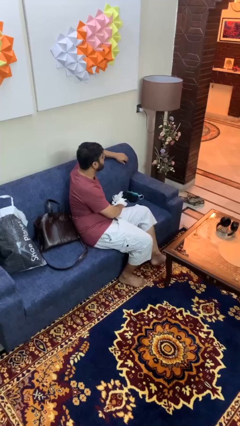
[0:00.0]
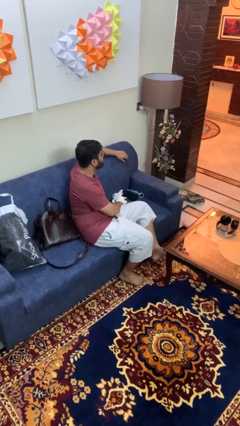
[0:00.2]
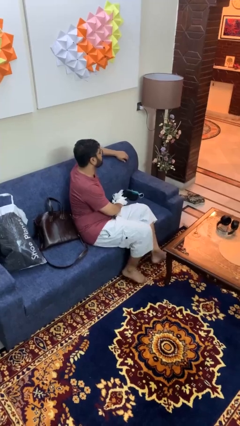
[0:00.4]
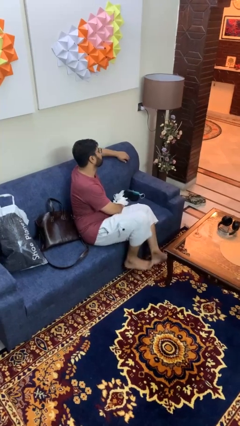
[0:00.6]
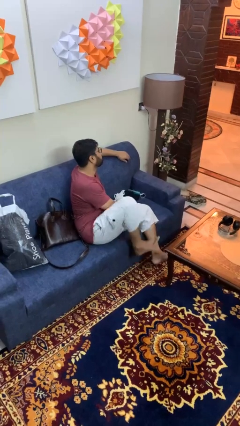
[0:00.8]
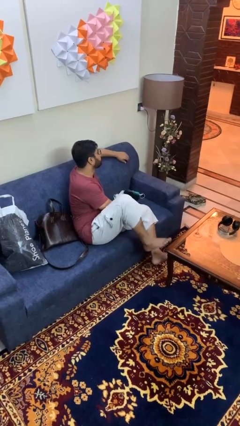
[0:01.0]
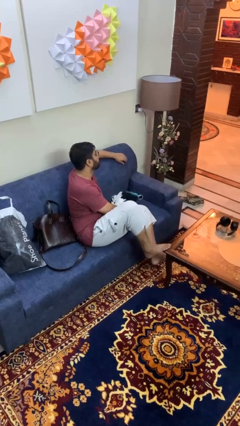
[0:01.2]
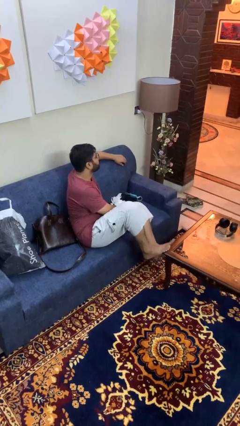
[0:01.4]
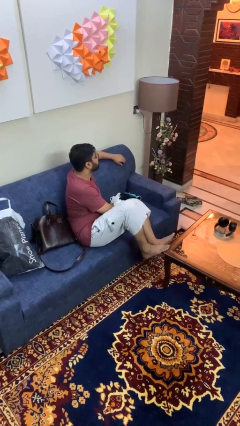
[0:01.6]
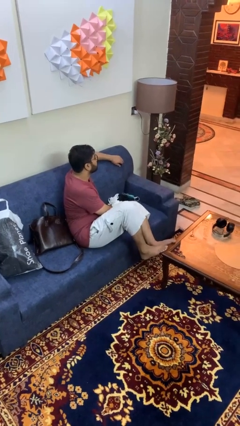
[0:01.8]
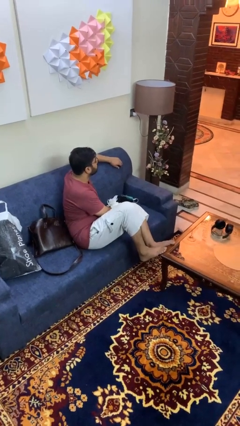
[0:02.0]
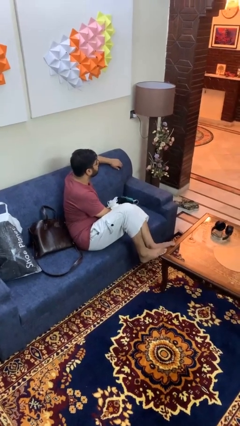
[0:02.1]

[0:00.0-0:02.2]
person puts feet up

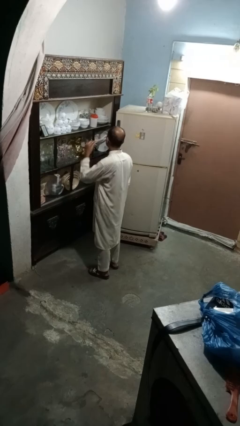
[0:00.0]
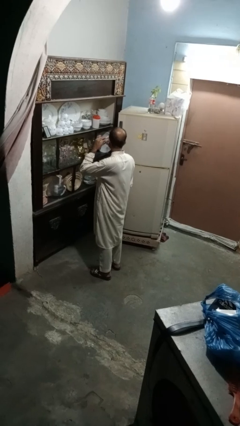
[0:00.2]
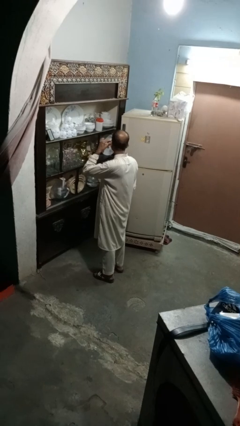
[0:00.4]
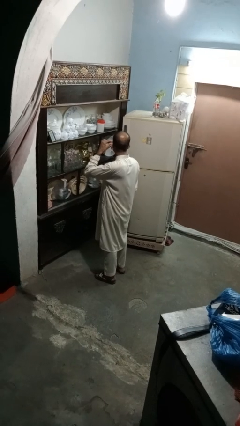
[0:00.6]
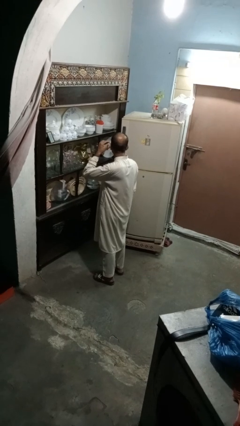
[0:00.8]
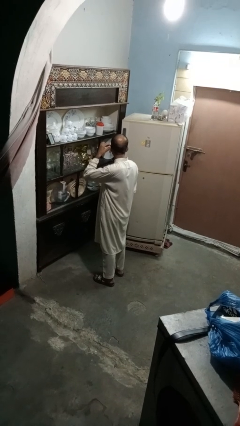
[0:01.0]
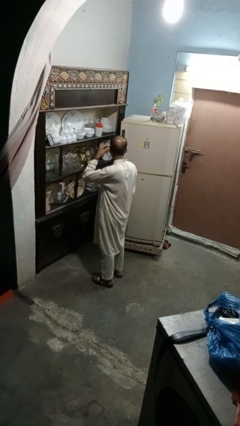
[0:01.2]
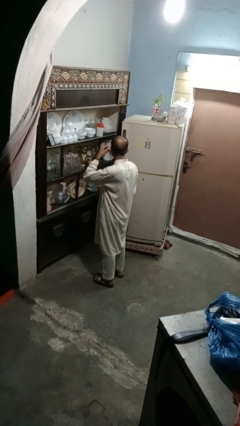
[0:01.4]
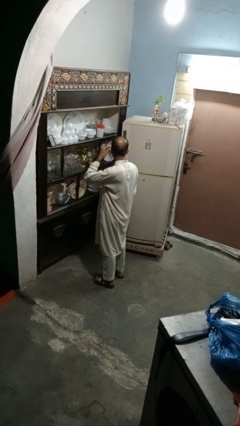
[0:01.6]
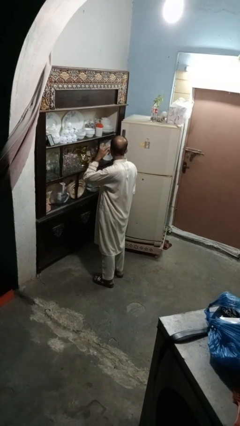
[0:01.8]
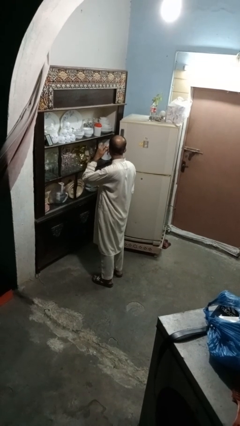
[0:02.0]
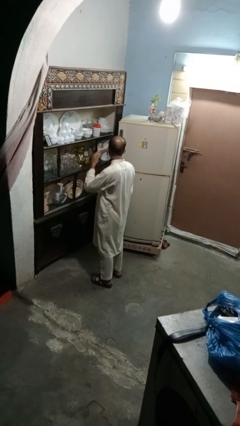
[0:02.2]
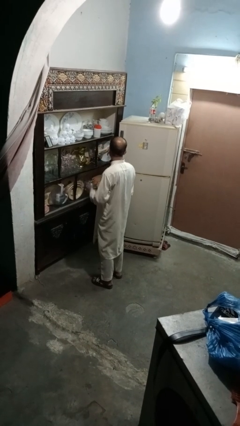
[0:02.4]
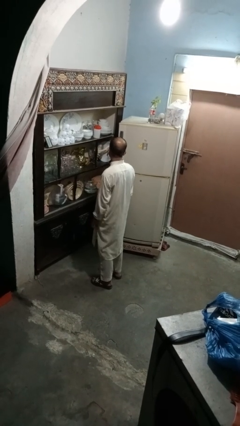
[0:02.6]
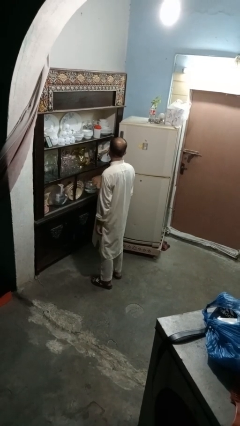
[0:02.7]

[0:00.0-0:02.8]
person puts on earrings

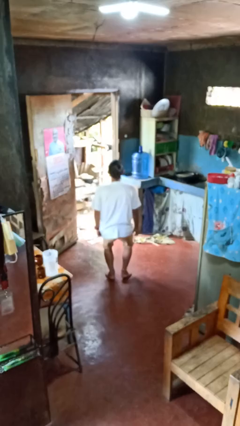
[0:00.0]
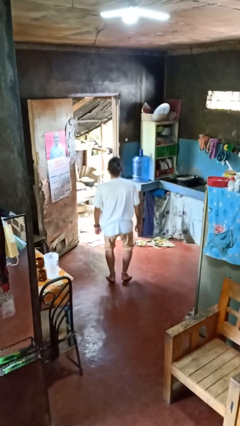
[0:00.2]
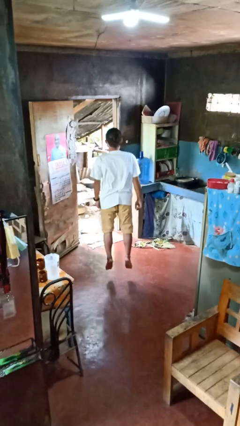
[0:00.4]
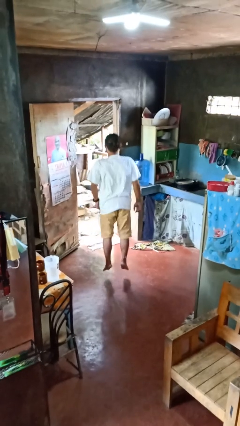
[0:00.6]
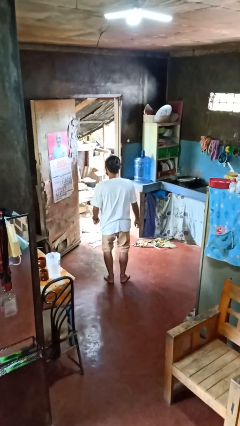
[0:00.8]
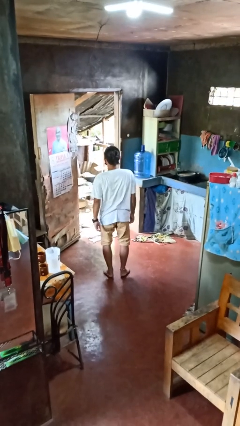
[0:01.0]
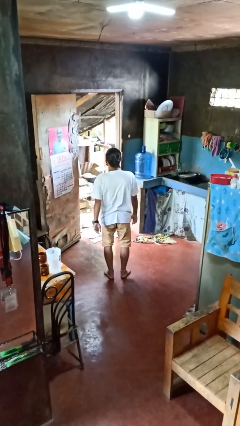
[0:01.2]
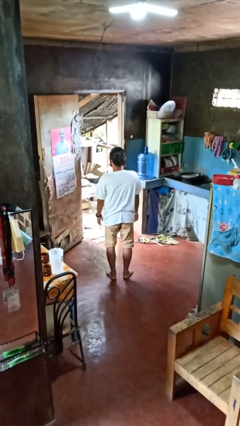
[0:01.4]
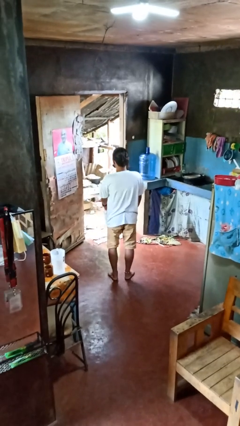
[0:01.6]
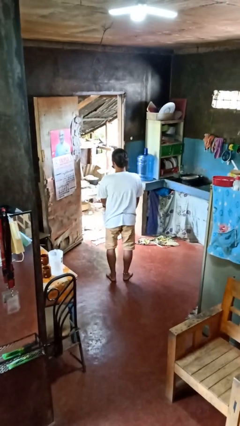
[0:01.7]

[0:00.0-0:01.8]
person jumps

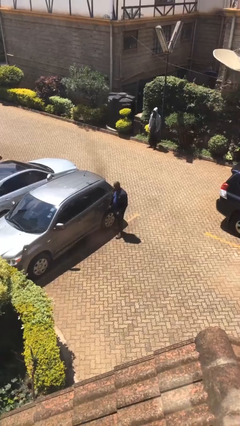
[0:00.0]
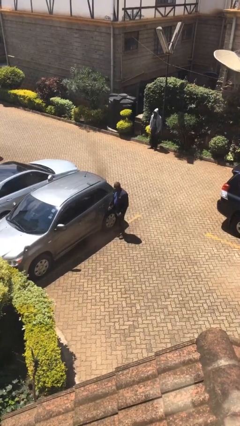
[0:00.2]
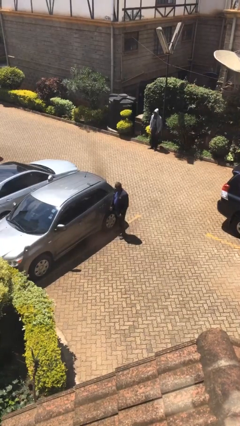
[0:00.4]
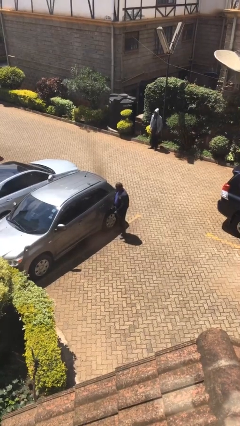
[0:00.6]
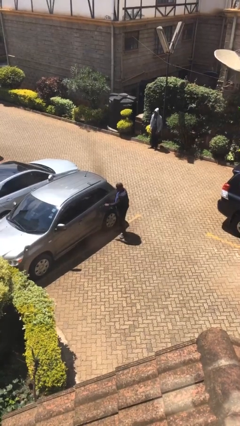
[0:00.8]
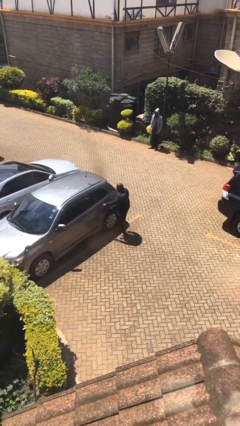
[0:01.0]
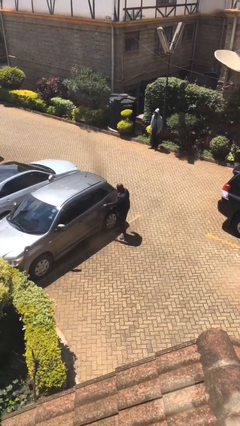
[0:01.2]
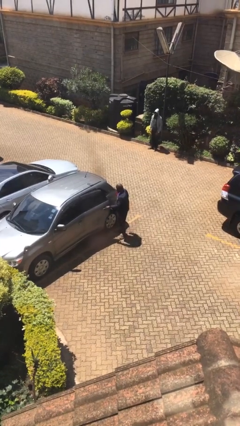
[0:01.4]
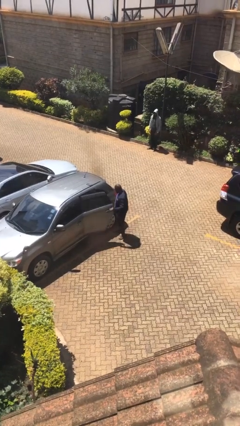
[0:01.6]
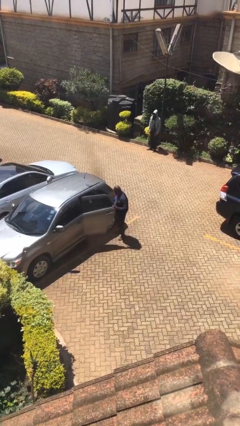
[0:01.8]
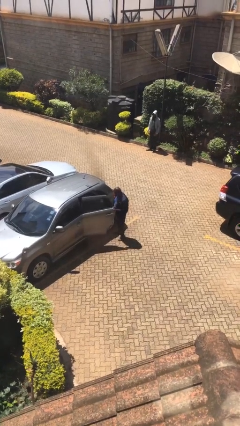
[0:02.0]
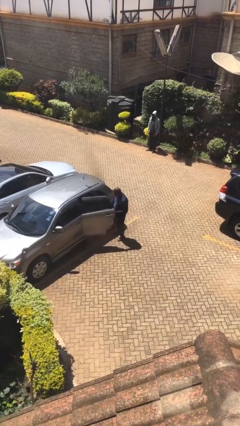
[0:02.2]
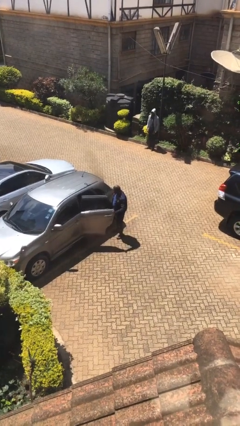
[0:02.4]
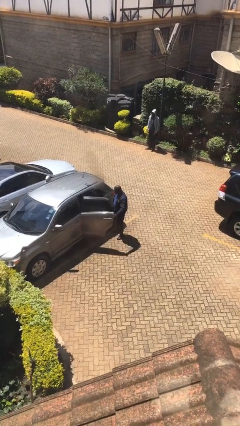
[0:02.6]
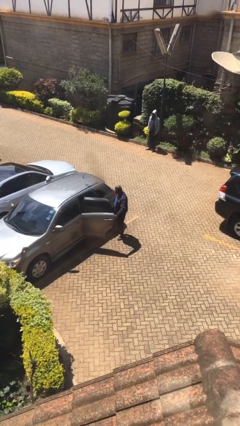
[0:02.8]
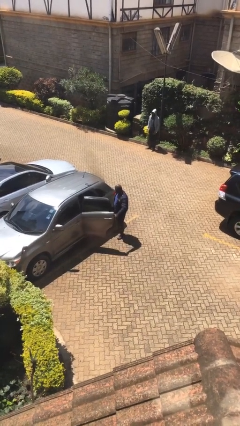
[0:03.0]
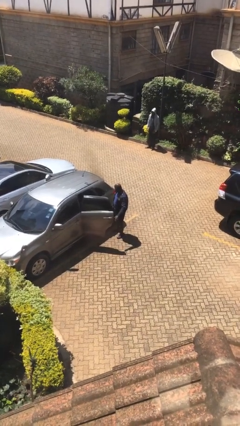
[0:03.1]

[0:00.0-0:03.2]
person opens car door

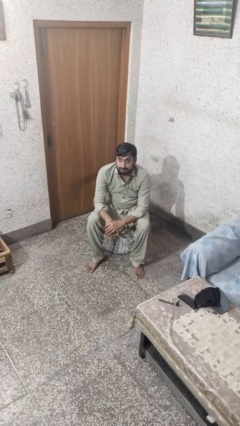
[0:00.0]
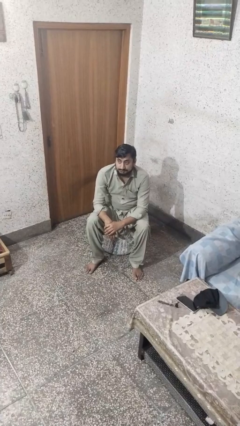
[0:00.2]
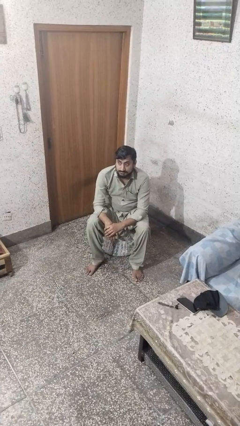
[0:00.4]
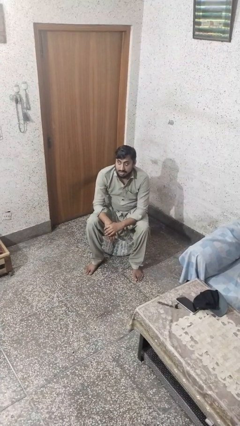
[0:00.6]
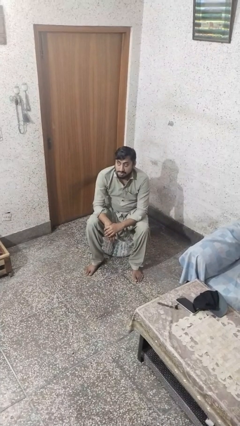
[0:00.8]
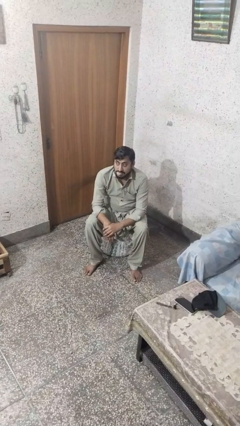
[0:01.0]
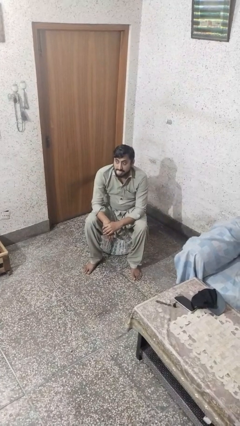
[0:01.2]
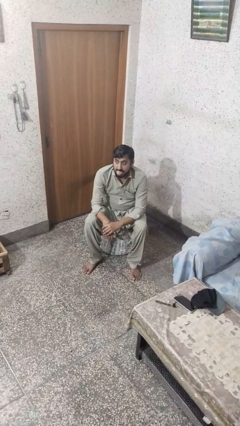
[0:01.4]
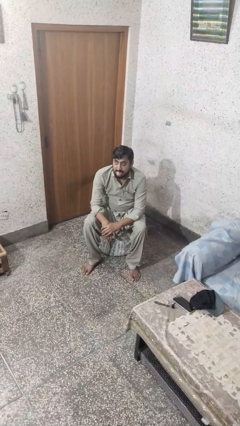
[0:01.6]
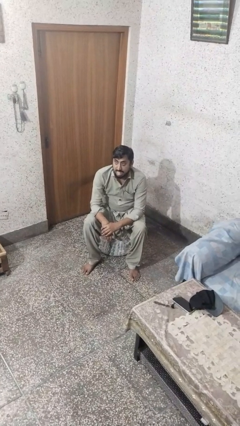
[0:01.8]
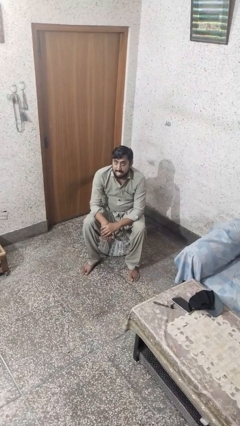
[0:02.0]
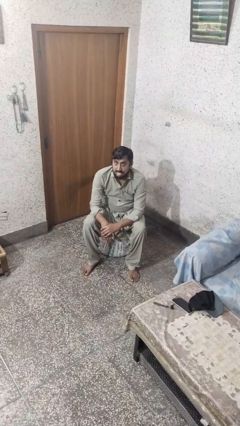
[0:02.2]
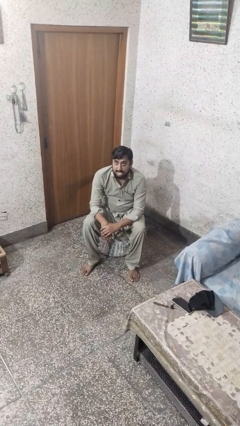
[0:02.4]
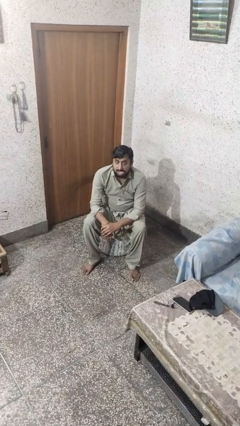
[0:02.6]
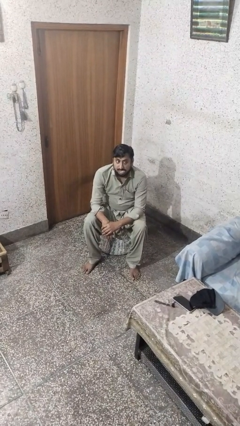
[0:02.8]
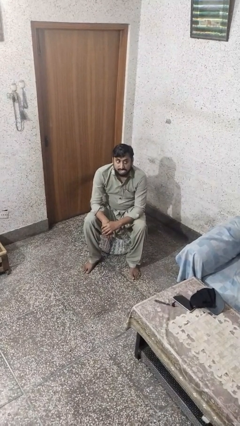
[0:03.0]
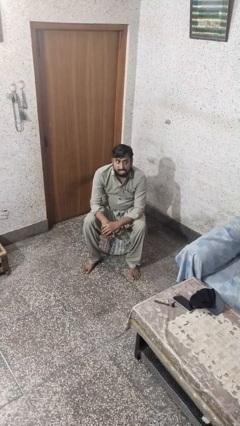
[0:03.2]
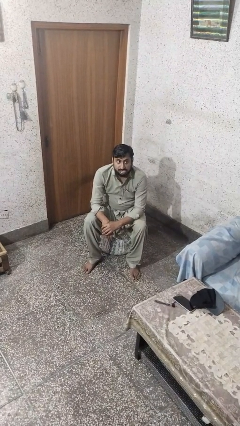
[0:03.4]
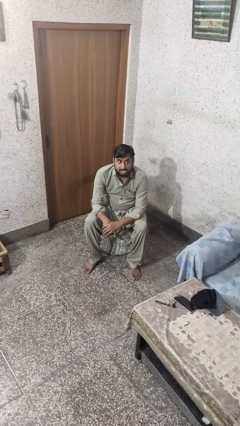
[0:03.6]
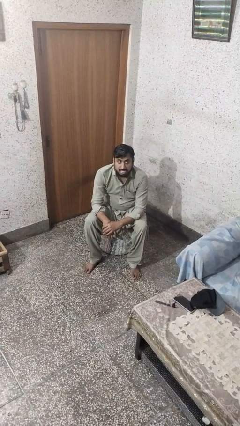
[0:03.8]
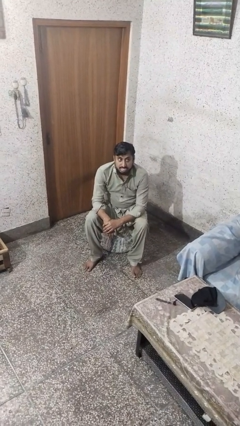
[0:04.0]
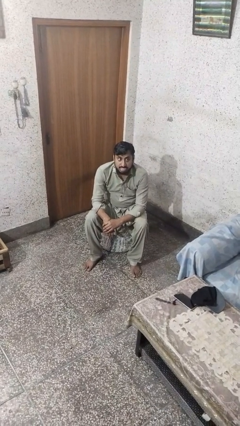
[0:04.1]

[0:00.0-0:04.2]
person sticks out tongue

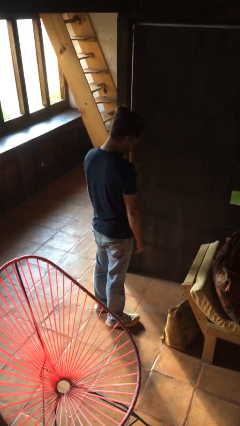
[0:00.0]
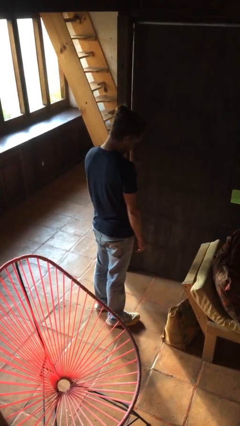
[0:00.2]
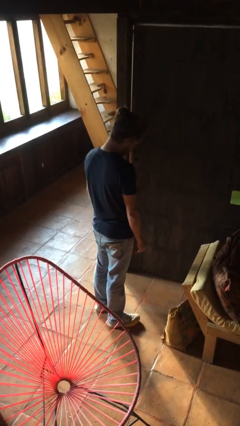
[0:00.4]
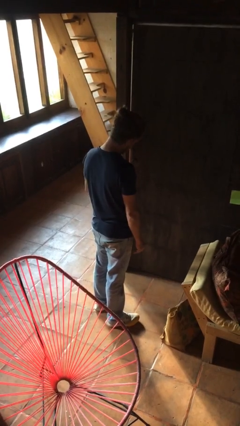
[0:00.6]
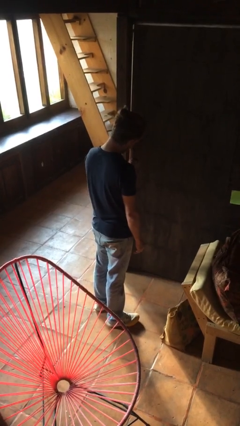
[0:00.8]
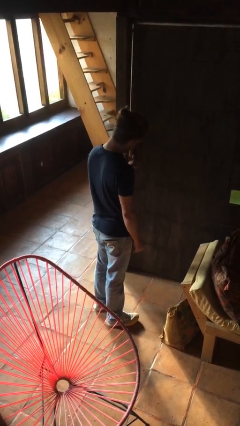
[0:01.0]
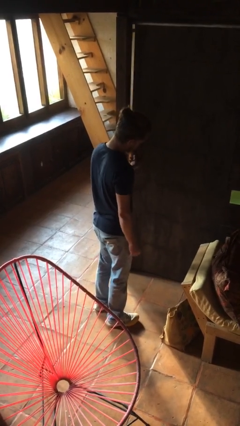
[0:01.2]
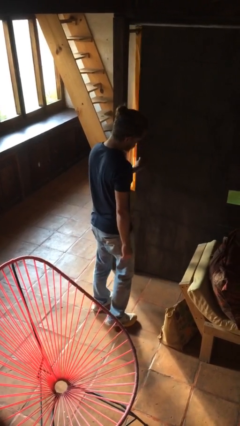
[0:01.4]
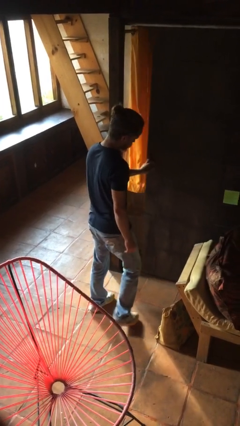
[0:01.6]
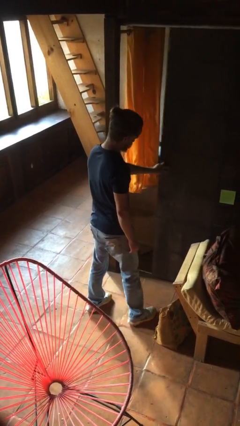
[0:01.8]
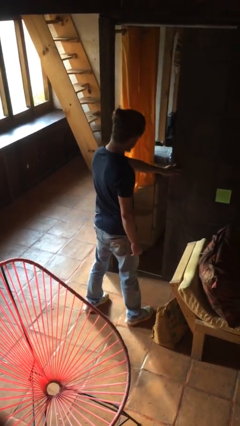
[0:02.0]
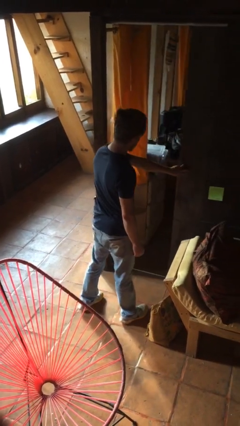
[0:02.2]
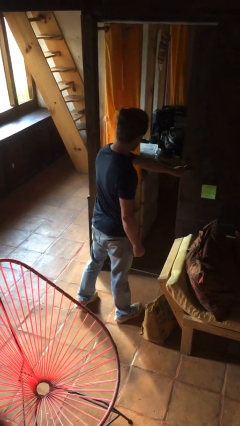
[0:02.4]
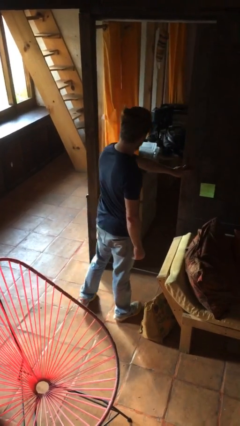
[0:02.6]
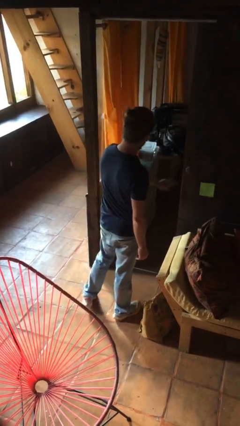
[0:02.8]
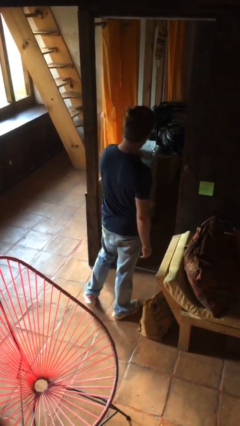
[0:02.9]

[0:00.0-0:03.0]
person opens sliding door
